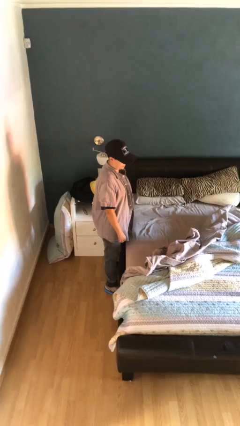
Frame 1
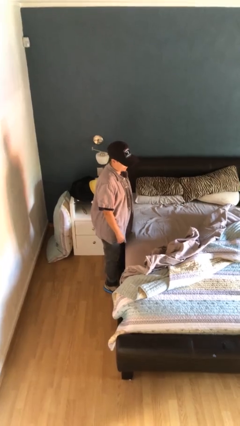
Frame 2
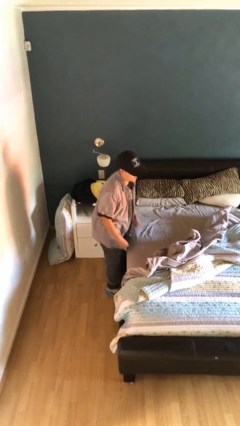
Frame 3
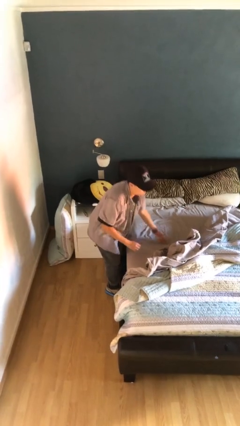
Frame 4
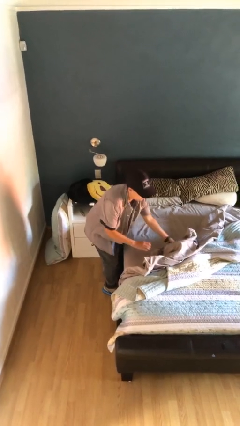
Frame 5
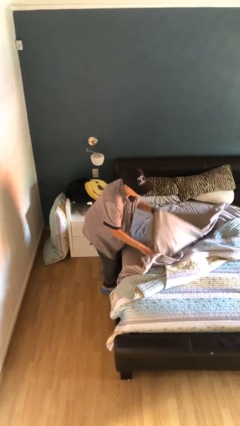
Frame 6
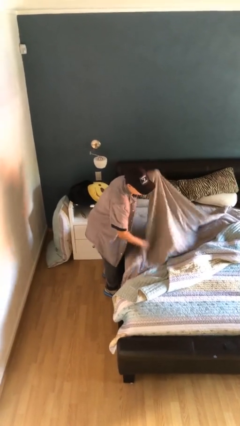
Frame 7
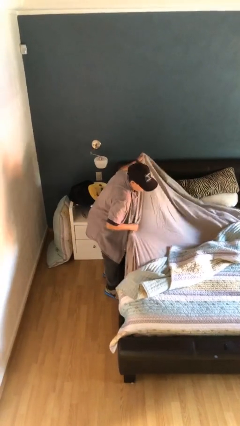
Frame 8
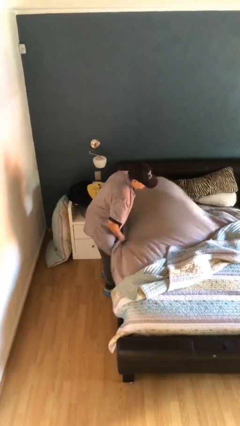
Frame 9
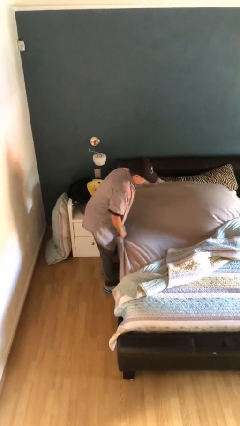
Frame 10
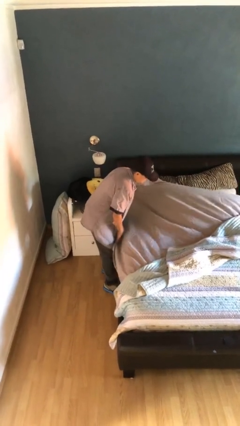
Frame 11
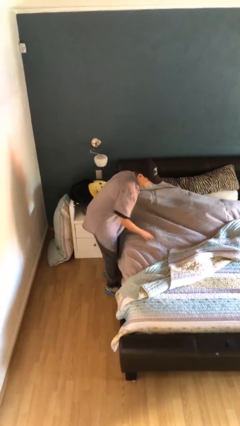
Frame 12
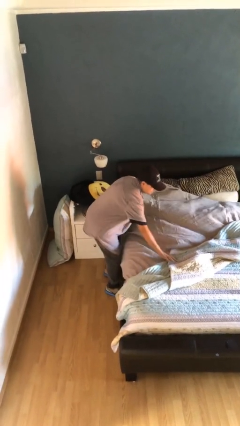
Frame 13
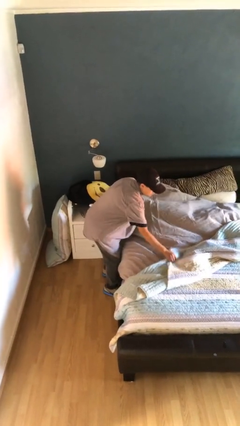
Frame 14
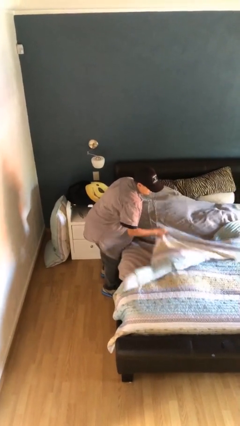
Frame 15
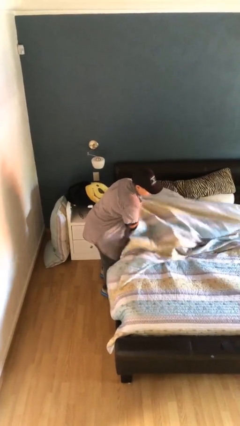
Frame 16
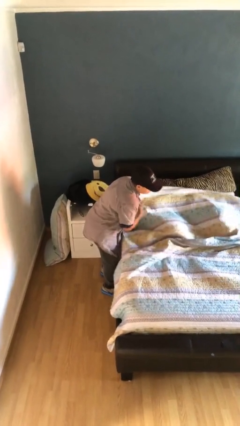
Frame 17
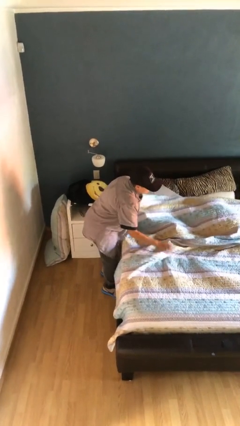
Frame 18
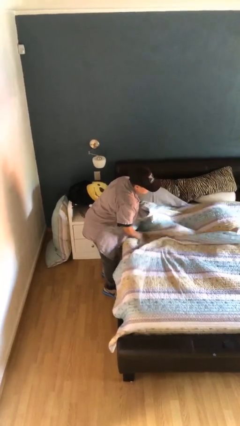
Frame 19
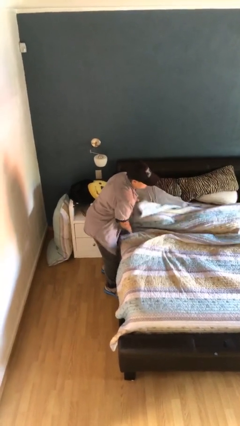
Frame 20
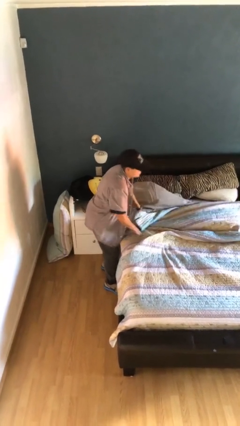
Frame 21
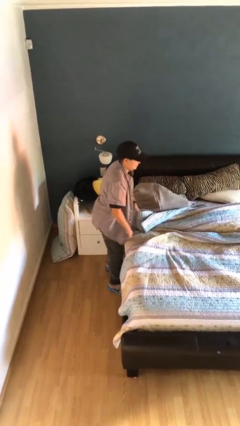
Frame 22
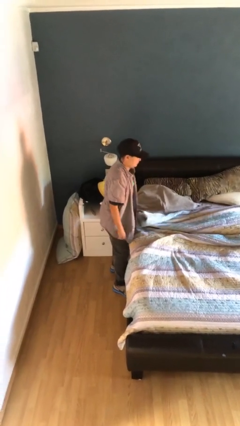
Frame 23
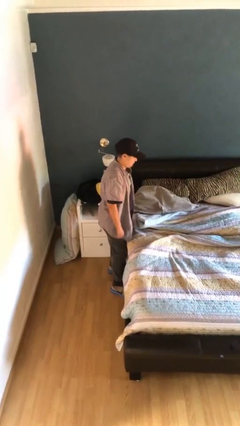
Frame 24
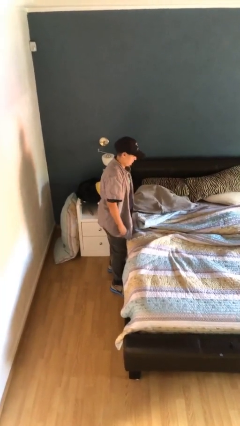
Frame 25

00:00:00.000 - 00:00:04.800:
person makes bed

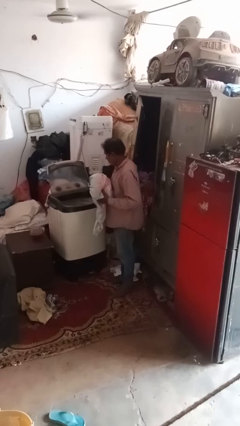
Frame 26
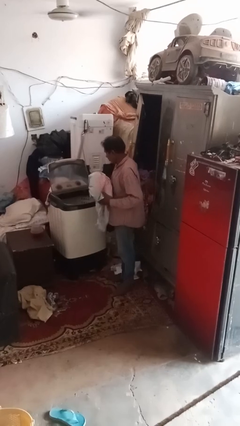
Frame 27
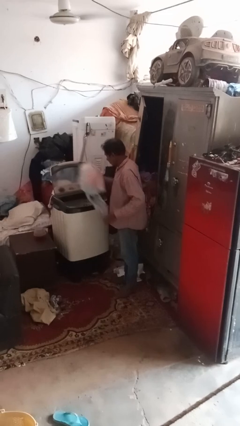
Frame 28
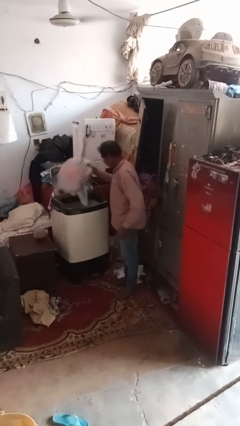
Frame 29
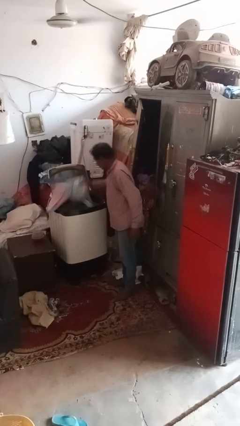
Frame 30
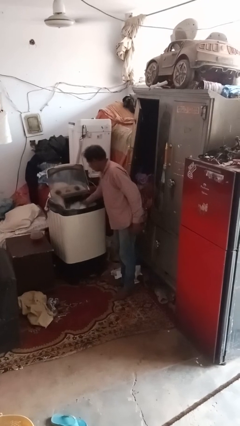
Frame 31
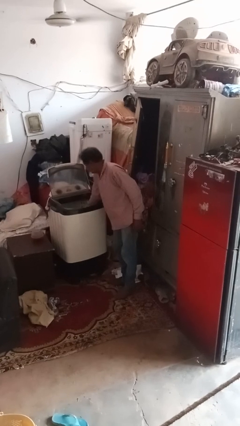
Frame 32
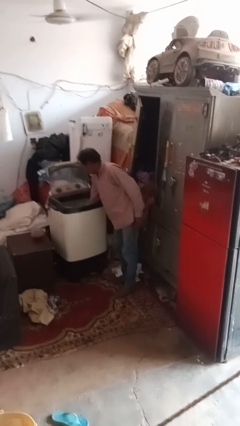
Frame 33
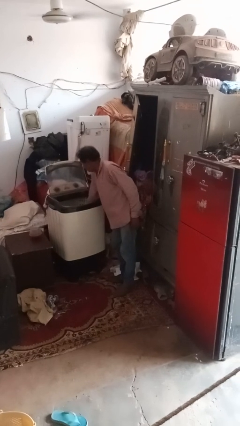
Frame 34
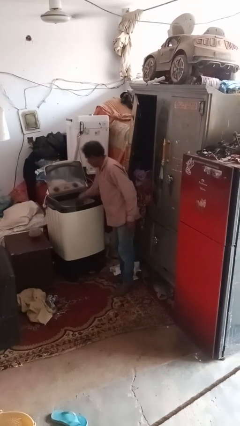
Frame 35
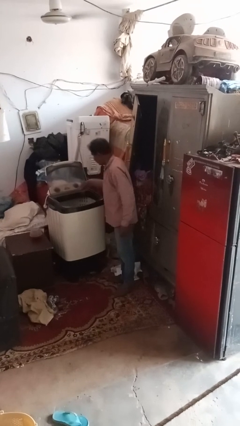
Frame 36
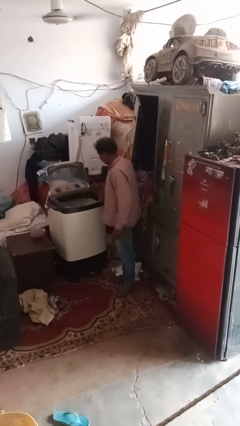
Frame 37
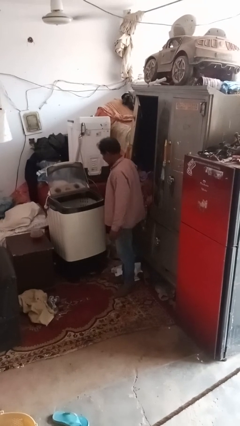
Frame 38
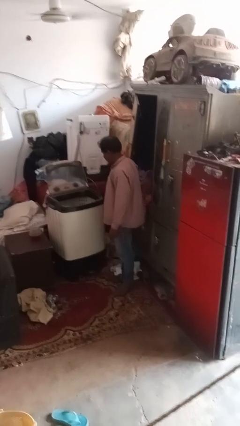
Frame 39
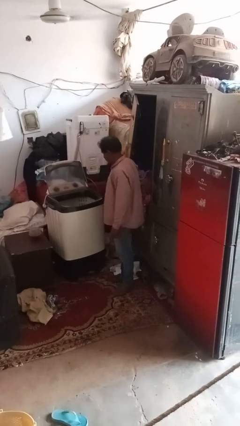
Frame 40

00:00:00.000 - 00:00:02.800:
person loads clotheswasher

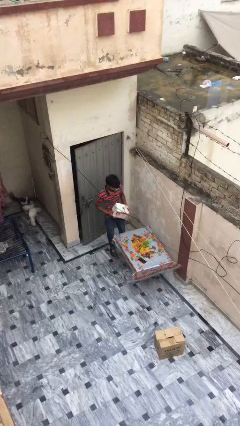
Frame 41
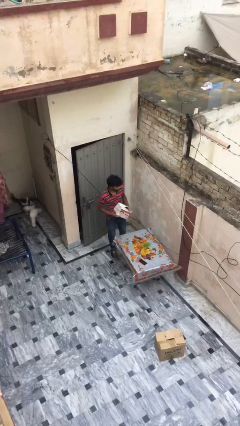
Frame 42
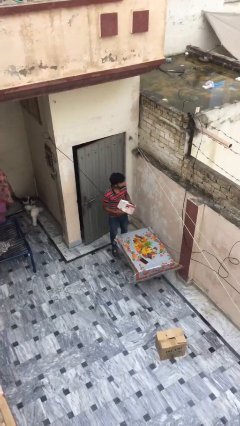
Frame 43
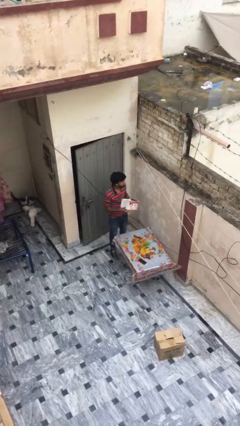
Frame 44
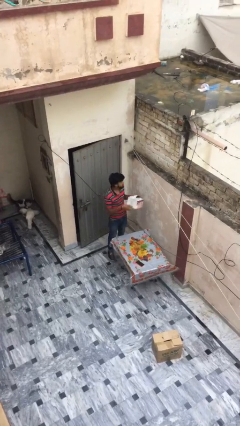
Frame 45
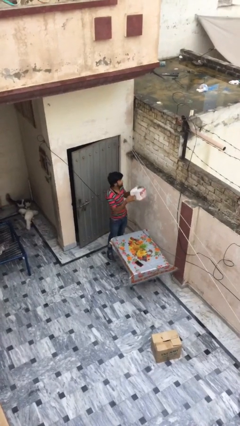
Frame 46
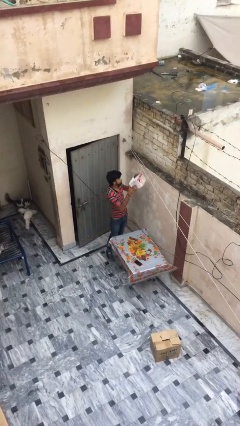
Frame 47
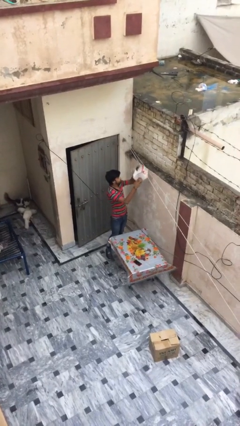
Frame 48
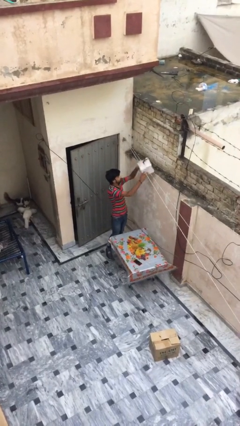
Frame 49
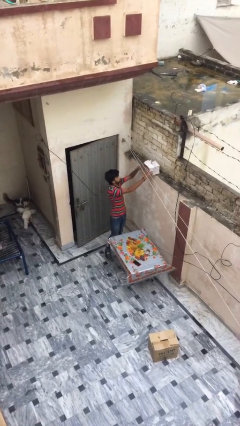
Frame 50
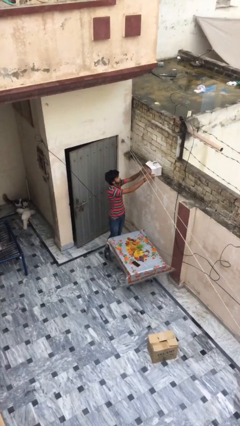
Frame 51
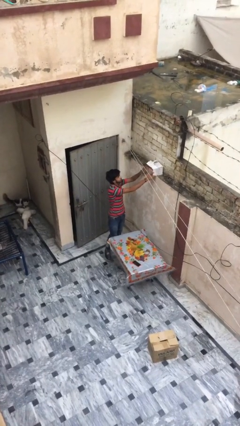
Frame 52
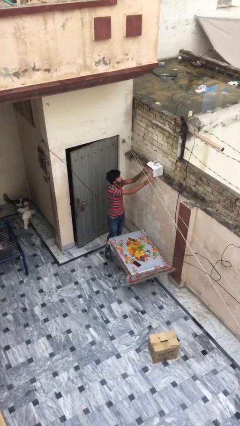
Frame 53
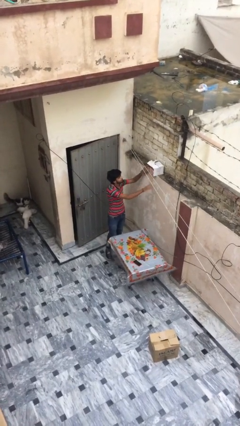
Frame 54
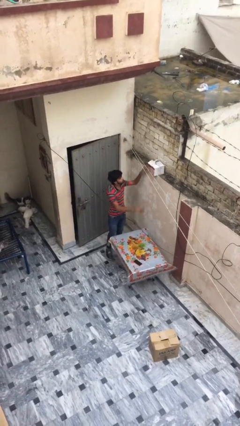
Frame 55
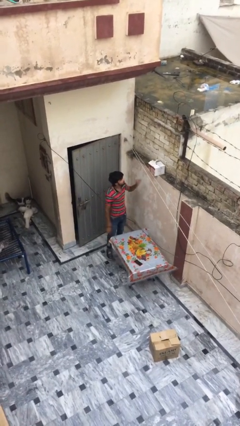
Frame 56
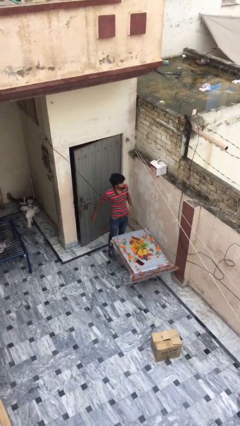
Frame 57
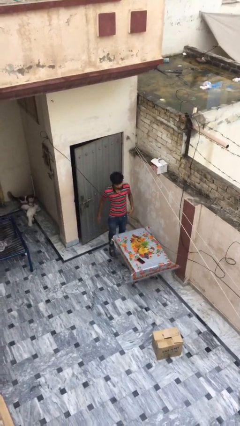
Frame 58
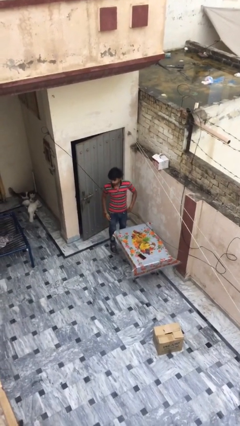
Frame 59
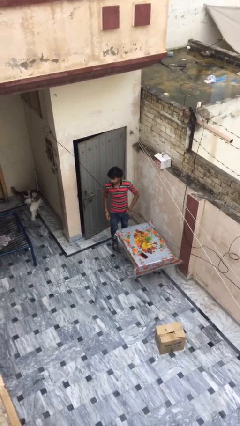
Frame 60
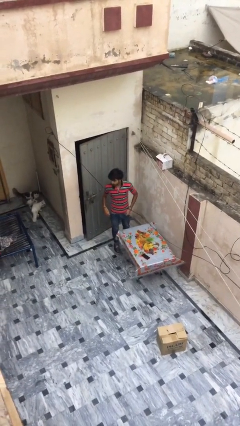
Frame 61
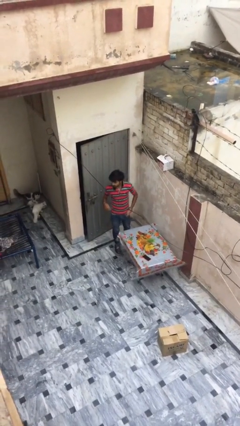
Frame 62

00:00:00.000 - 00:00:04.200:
person puts down object on shelf

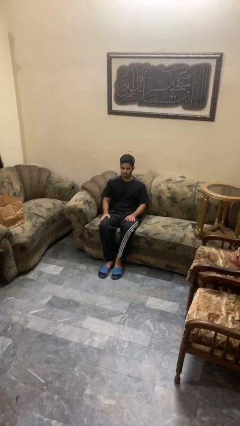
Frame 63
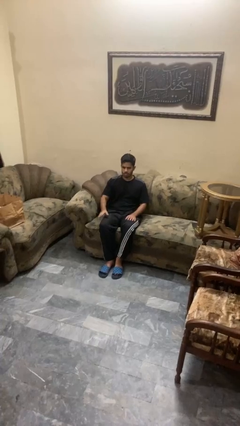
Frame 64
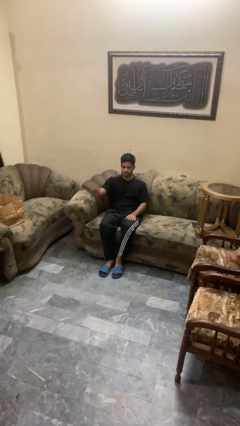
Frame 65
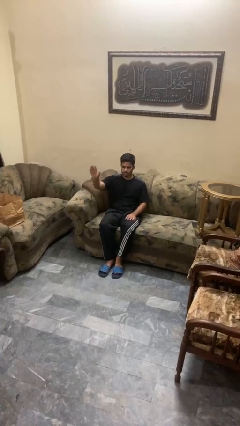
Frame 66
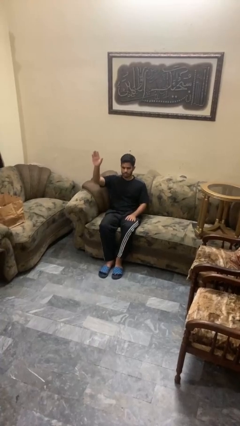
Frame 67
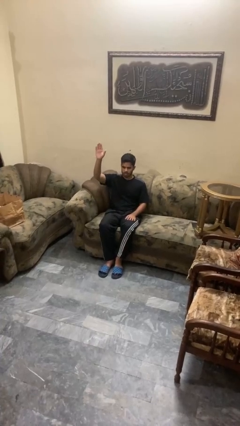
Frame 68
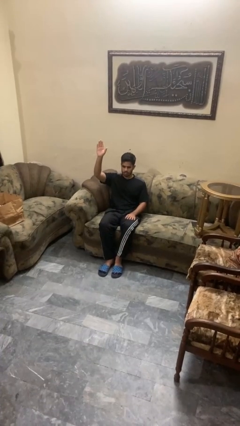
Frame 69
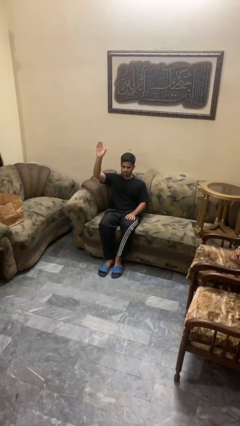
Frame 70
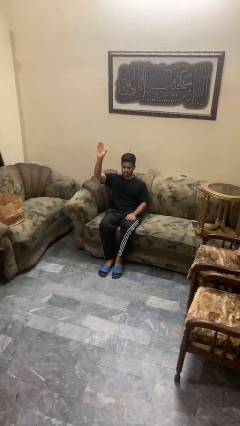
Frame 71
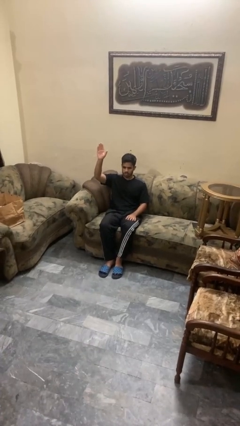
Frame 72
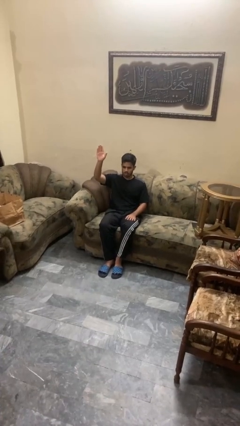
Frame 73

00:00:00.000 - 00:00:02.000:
person gestures raise hand

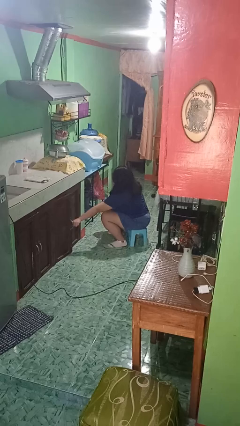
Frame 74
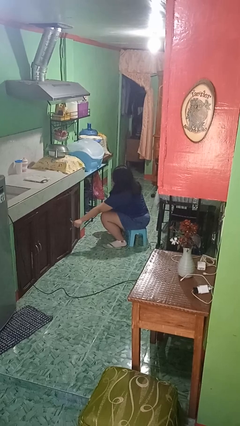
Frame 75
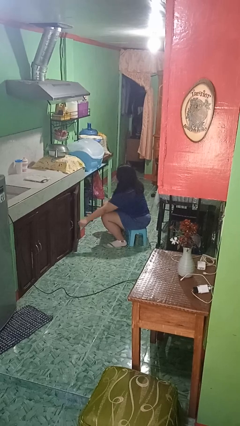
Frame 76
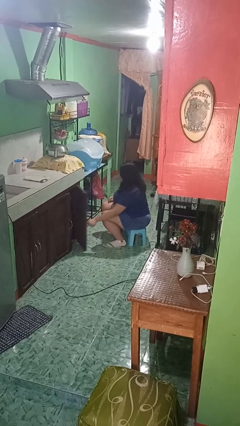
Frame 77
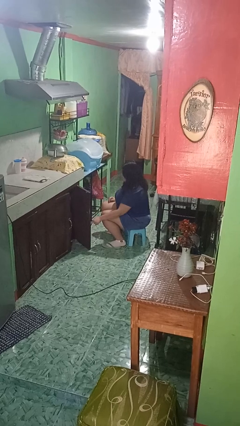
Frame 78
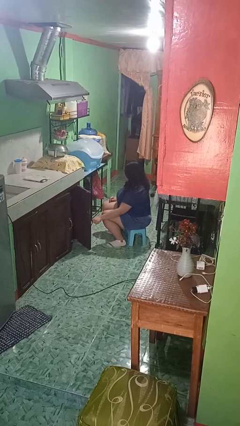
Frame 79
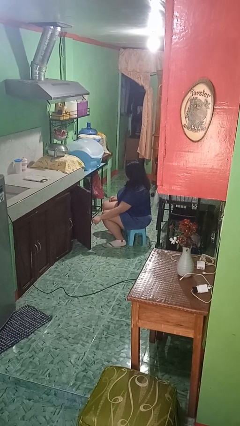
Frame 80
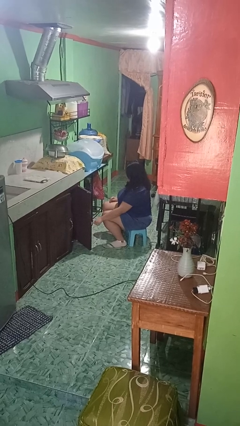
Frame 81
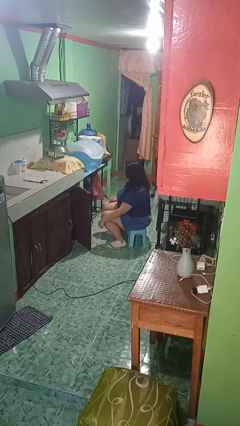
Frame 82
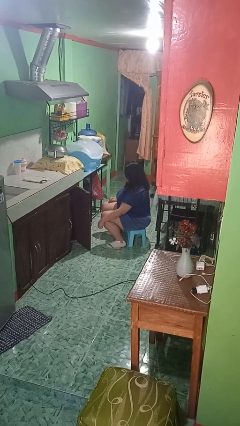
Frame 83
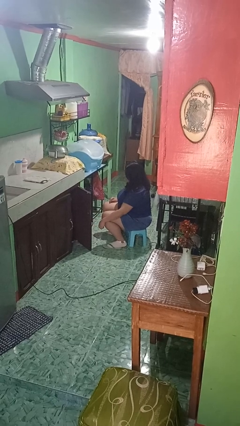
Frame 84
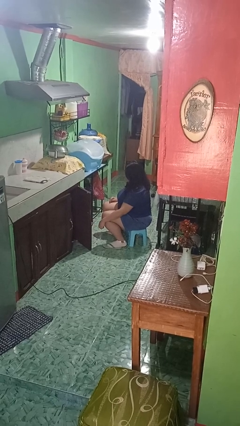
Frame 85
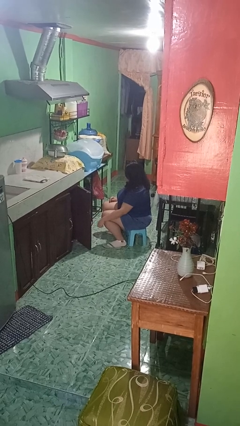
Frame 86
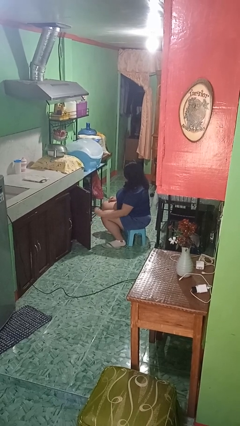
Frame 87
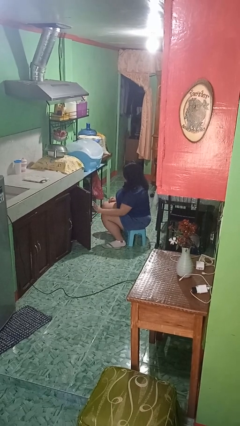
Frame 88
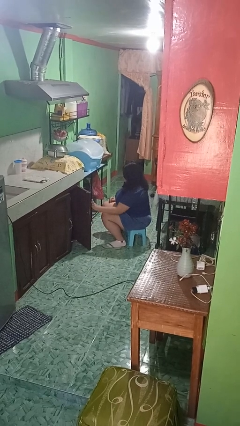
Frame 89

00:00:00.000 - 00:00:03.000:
person opens cabinet

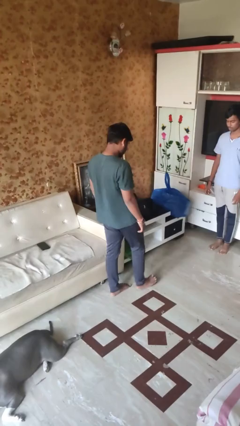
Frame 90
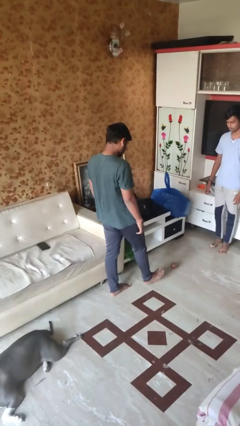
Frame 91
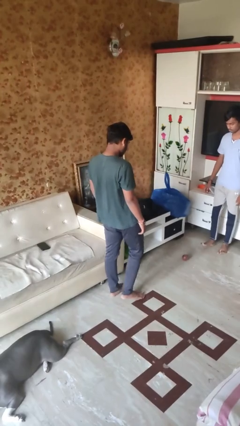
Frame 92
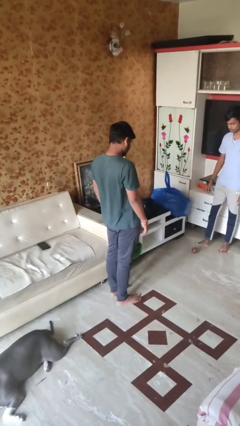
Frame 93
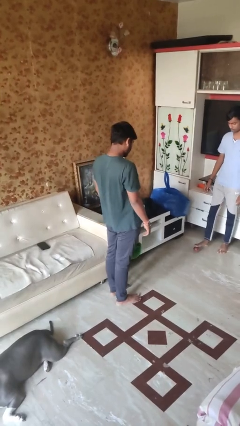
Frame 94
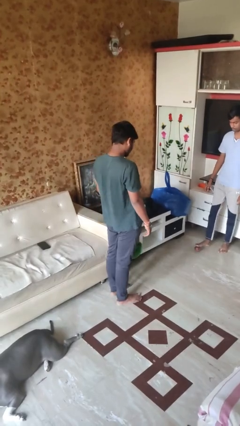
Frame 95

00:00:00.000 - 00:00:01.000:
person kicks object to person
